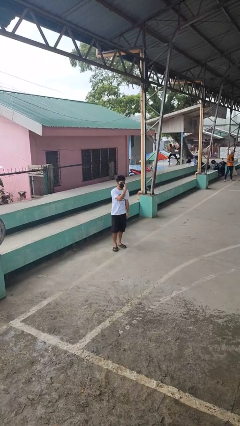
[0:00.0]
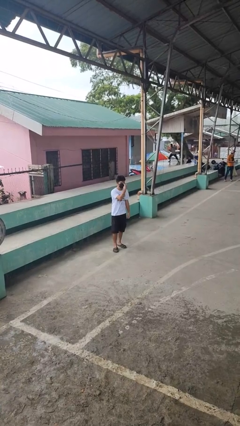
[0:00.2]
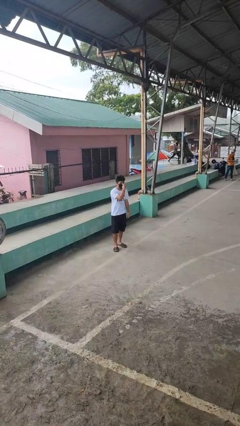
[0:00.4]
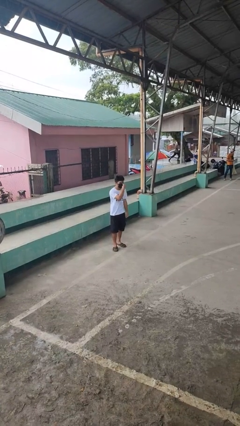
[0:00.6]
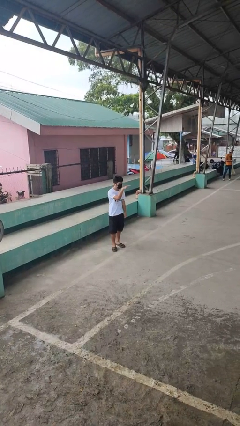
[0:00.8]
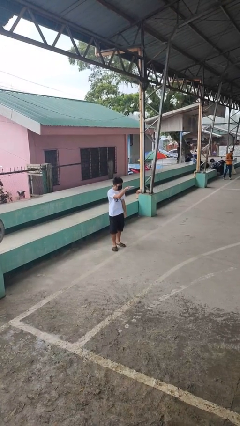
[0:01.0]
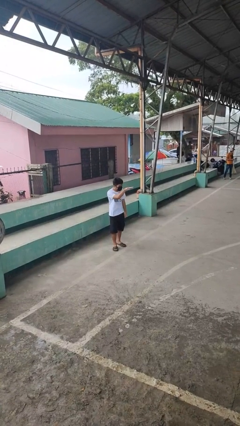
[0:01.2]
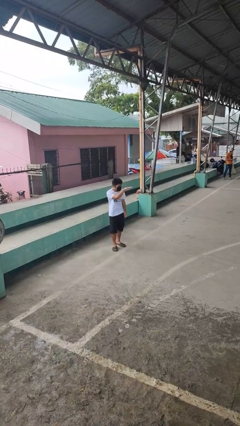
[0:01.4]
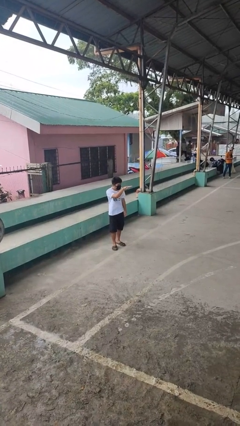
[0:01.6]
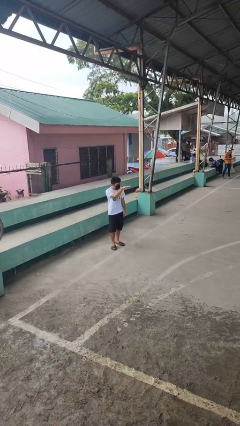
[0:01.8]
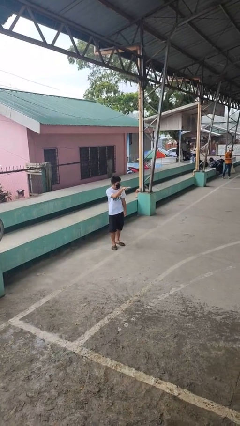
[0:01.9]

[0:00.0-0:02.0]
person gestures watch closely

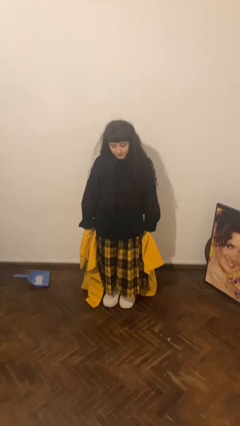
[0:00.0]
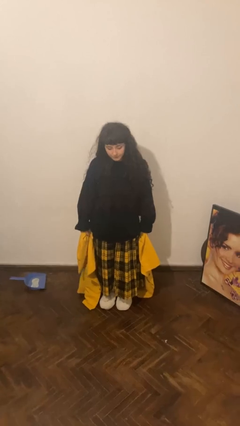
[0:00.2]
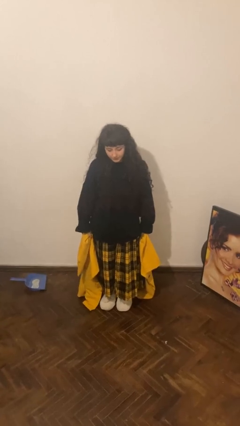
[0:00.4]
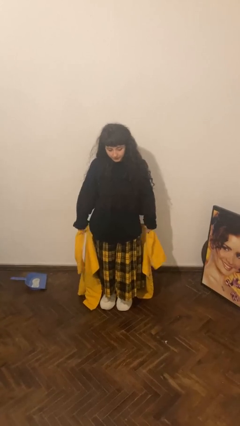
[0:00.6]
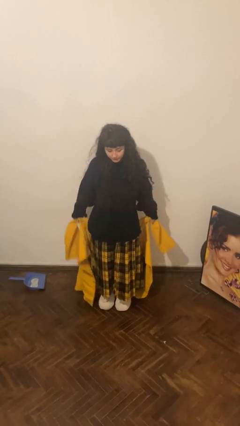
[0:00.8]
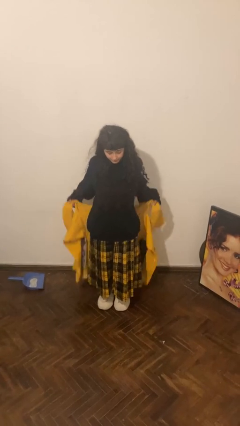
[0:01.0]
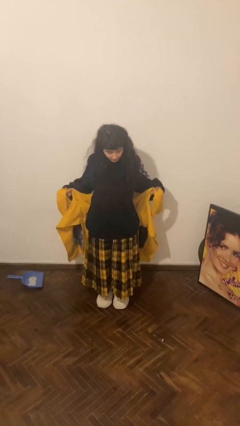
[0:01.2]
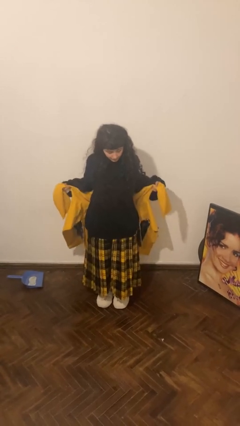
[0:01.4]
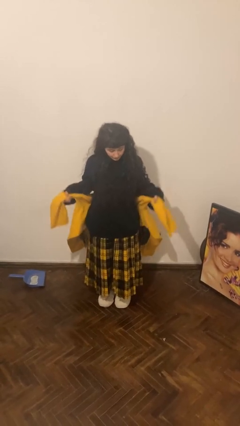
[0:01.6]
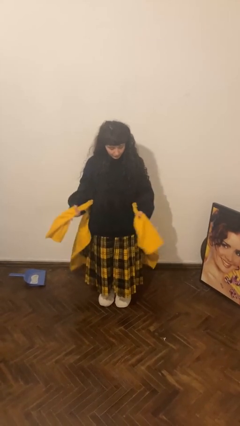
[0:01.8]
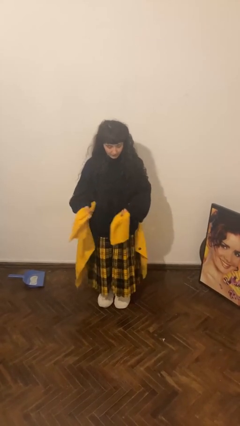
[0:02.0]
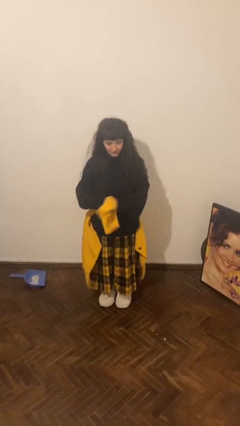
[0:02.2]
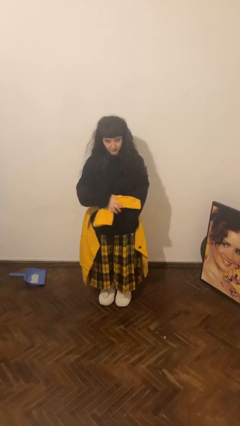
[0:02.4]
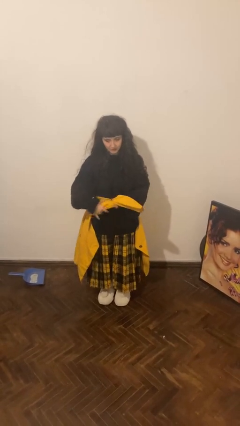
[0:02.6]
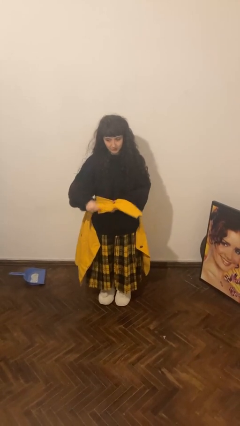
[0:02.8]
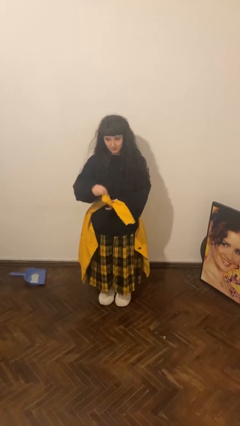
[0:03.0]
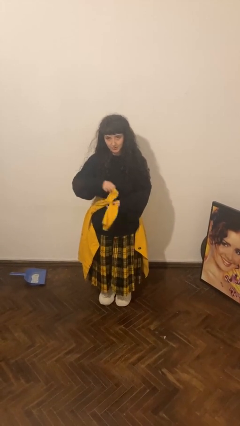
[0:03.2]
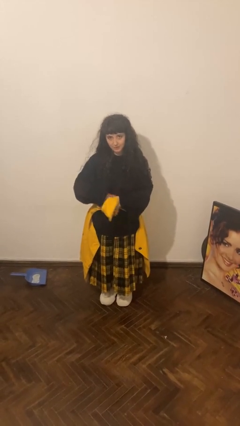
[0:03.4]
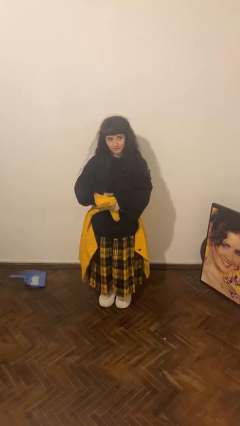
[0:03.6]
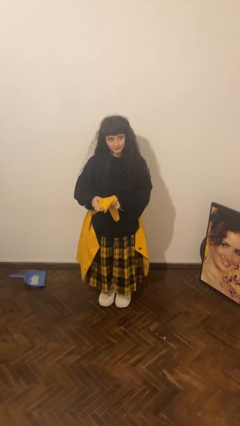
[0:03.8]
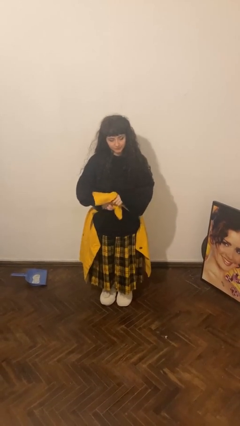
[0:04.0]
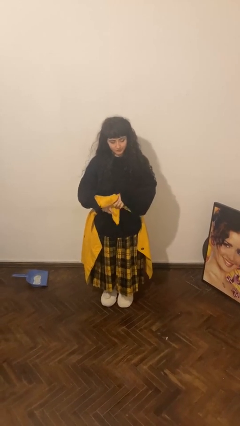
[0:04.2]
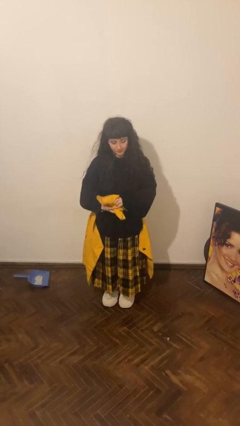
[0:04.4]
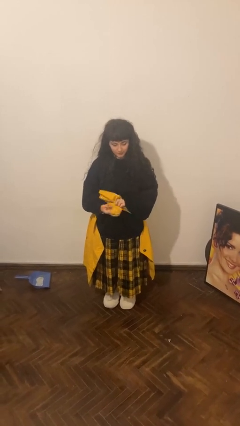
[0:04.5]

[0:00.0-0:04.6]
person ties jacket around waist

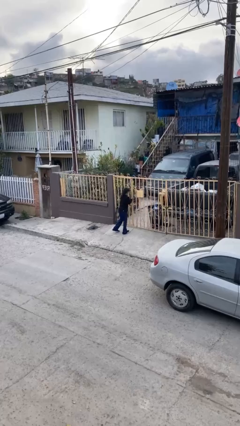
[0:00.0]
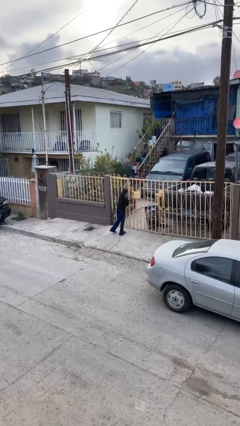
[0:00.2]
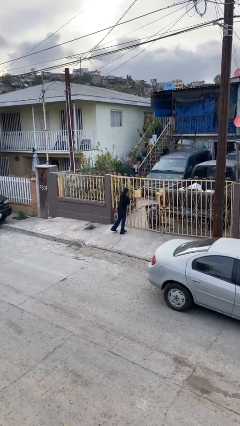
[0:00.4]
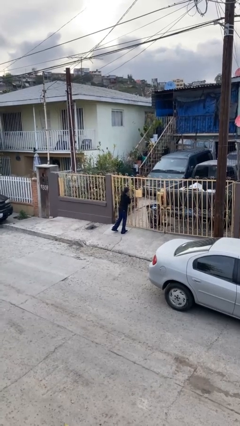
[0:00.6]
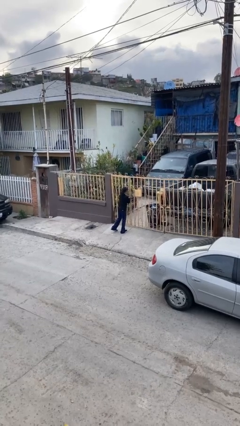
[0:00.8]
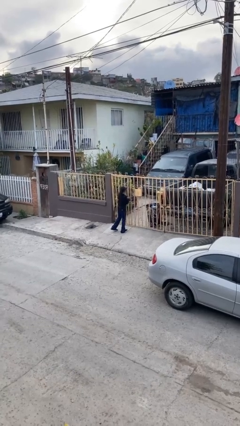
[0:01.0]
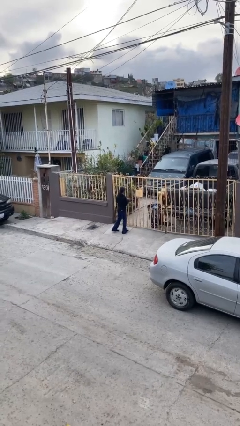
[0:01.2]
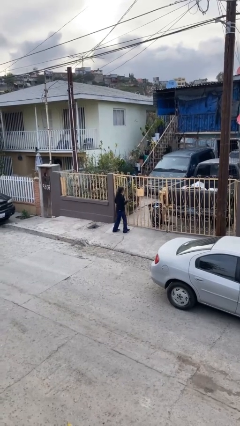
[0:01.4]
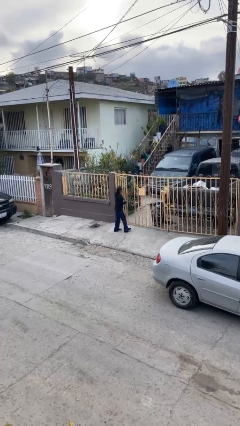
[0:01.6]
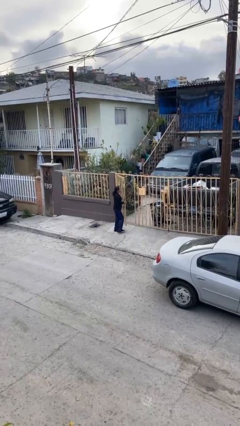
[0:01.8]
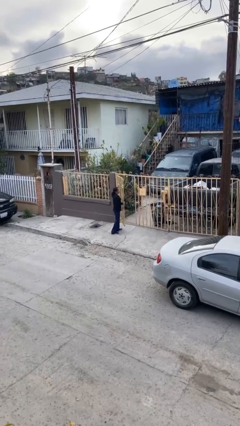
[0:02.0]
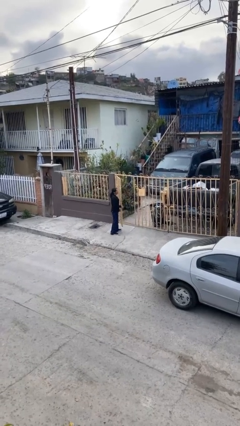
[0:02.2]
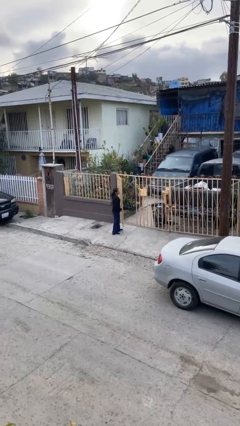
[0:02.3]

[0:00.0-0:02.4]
person opens facility door

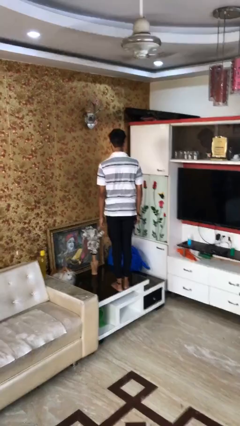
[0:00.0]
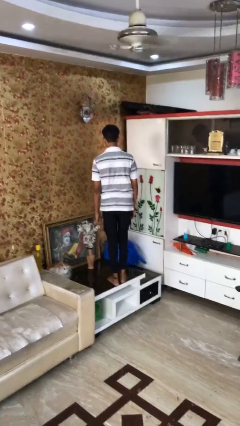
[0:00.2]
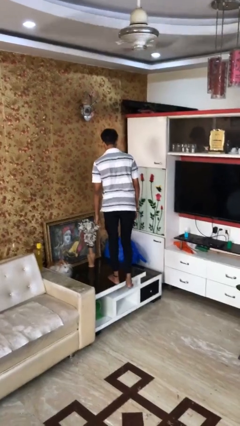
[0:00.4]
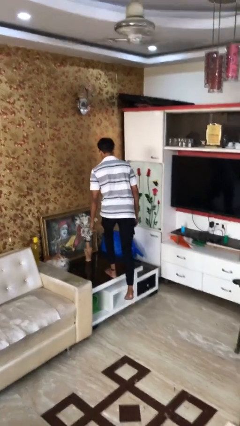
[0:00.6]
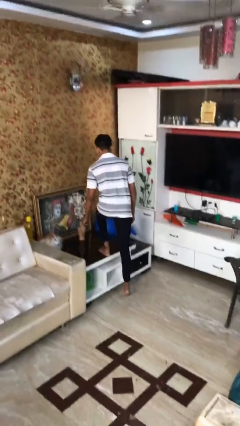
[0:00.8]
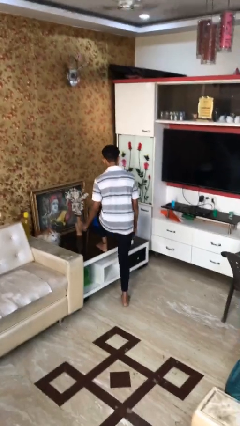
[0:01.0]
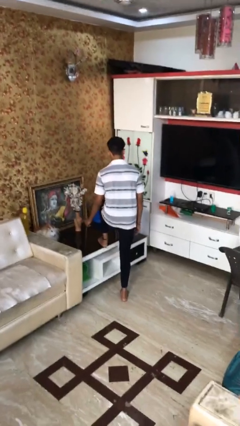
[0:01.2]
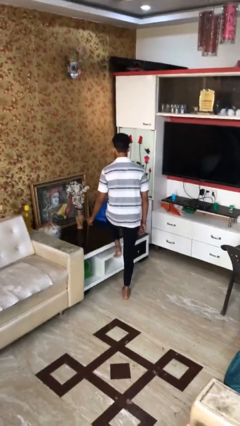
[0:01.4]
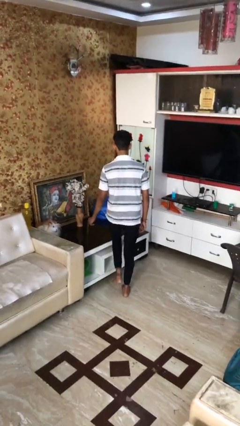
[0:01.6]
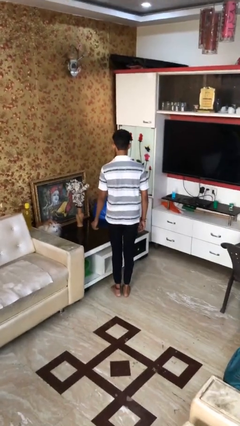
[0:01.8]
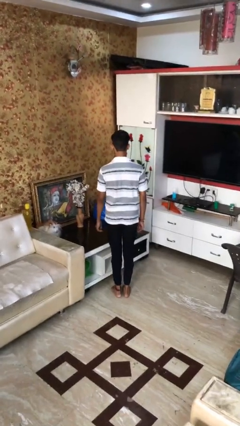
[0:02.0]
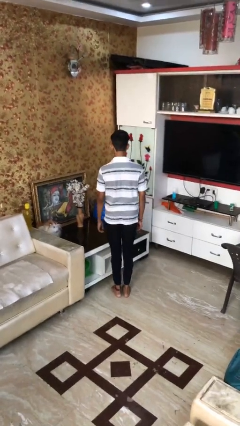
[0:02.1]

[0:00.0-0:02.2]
person climbs off table

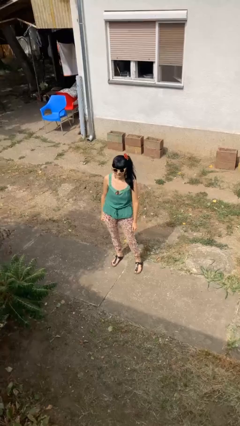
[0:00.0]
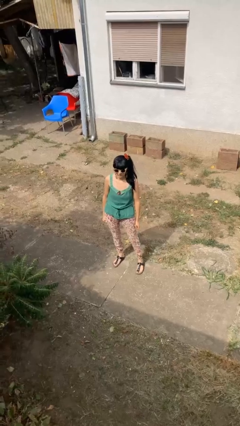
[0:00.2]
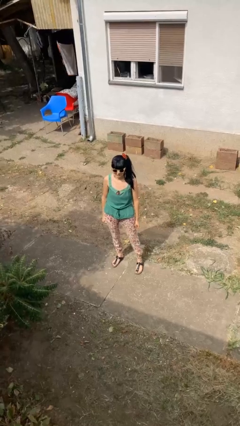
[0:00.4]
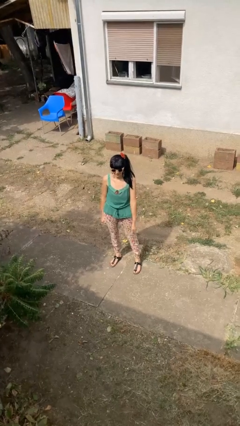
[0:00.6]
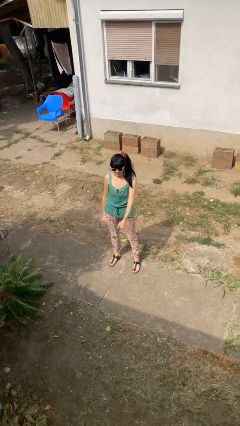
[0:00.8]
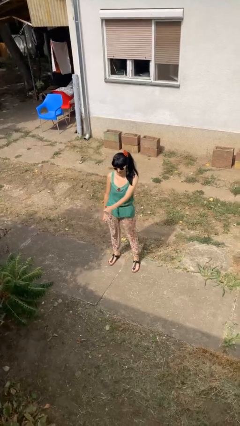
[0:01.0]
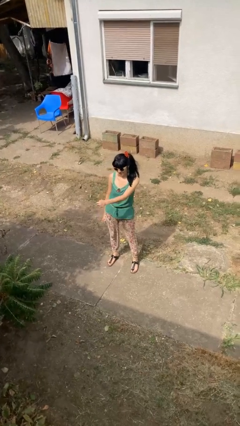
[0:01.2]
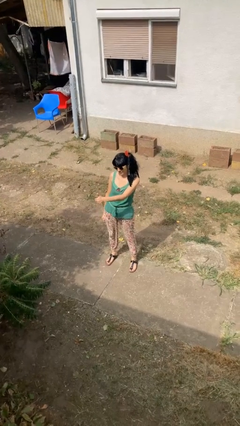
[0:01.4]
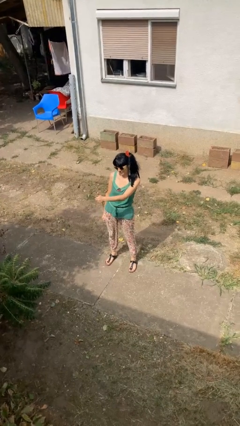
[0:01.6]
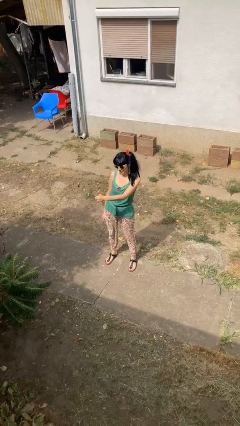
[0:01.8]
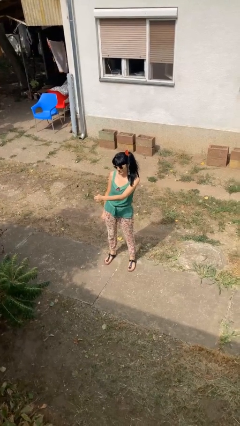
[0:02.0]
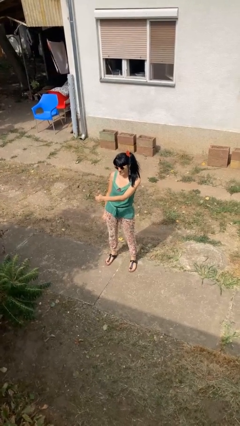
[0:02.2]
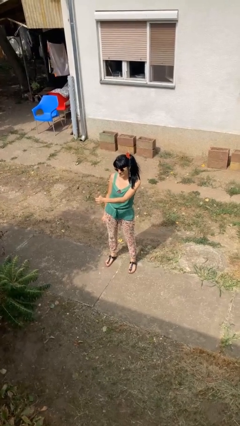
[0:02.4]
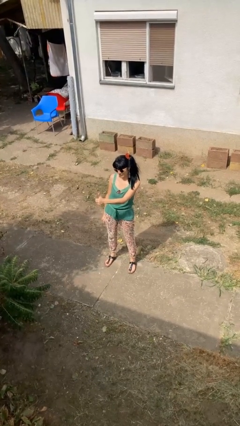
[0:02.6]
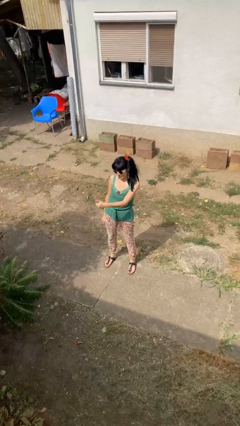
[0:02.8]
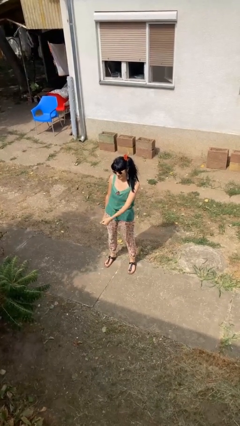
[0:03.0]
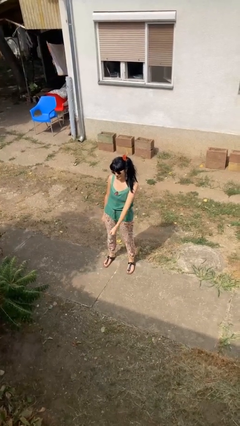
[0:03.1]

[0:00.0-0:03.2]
person gestures thumbs up

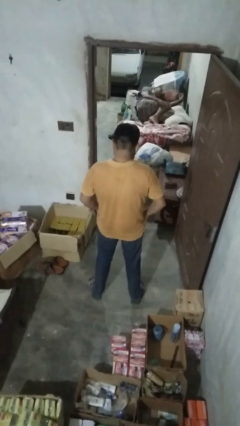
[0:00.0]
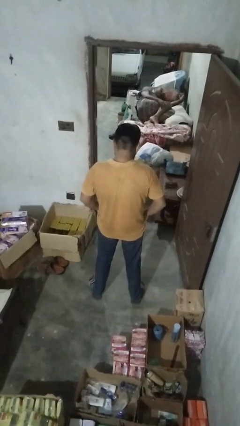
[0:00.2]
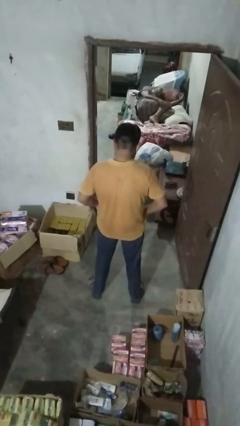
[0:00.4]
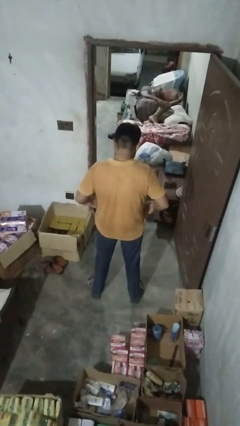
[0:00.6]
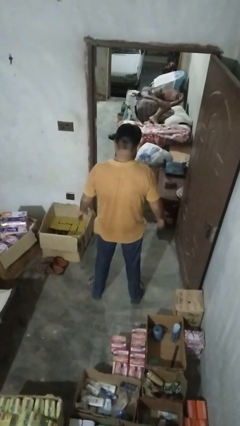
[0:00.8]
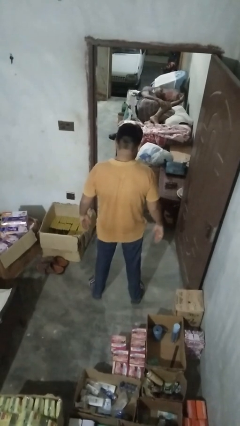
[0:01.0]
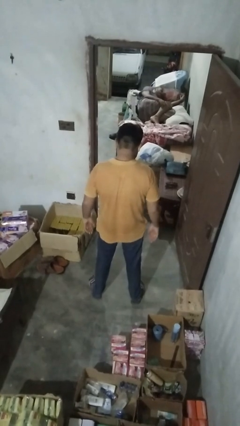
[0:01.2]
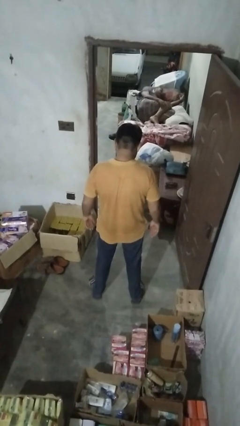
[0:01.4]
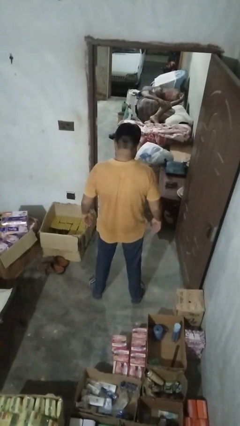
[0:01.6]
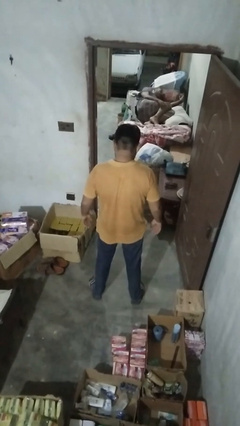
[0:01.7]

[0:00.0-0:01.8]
person puts hands in back pockets

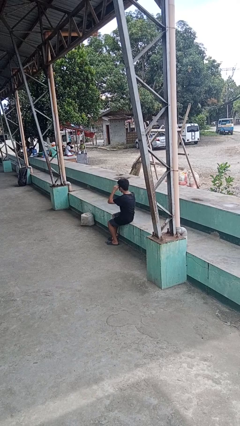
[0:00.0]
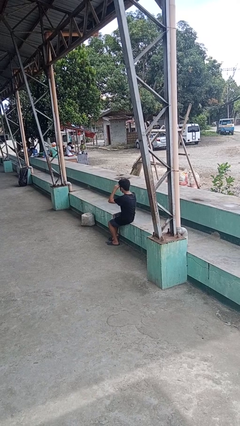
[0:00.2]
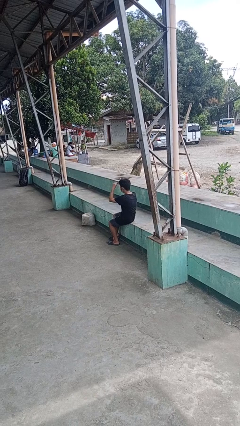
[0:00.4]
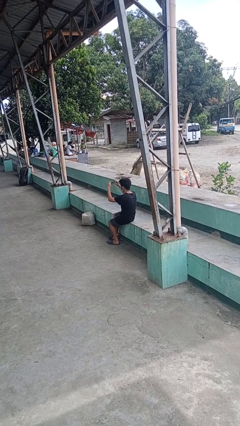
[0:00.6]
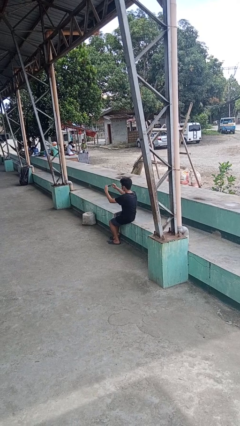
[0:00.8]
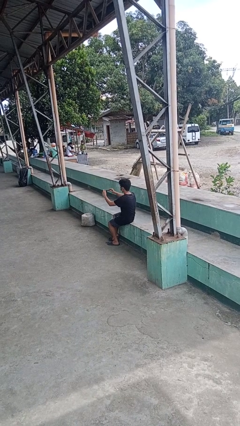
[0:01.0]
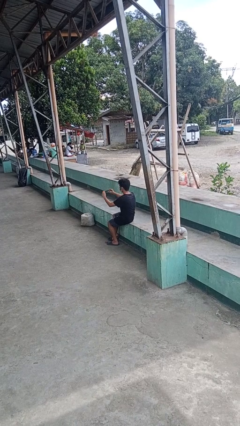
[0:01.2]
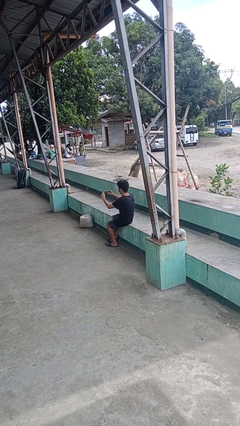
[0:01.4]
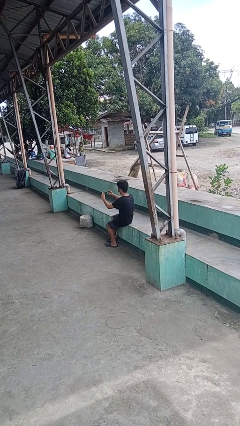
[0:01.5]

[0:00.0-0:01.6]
person takes off sunglasses
